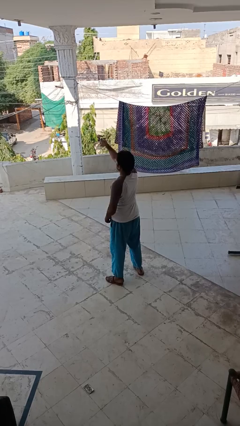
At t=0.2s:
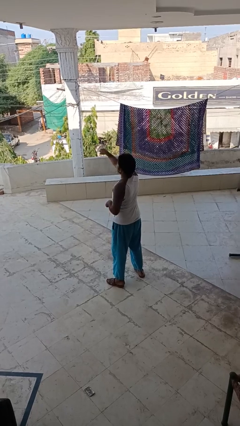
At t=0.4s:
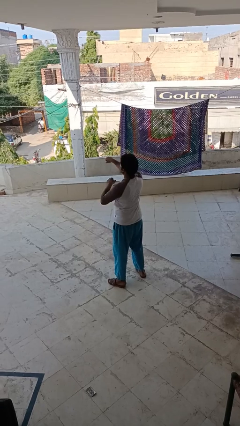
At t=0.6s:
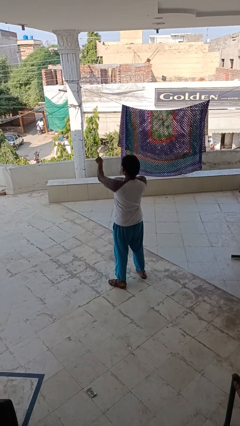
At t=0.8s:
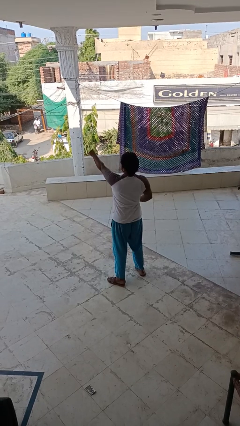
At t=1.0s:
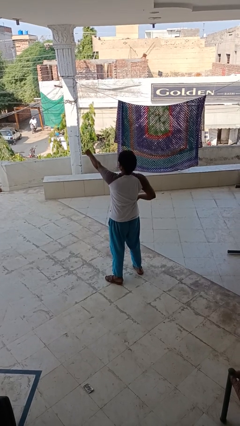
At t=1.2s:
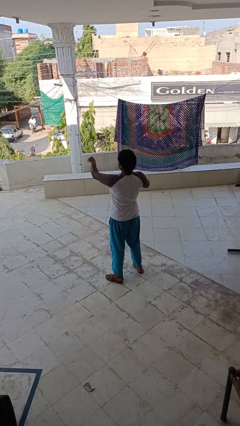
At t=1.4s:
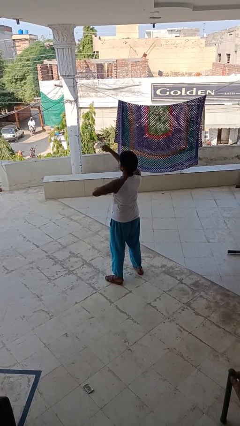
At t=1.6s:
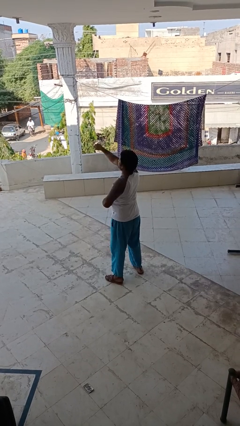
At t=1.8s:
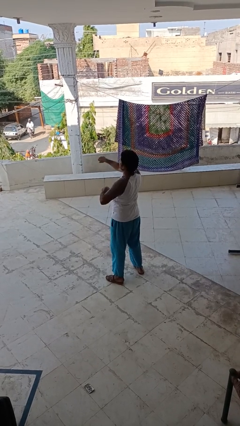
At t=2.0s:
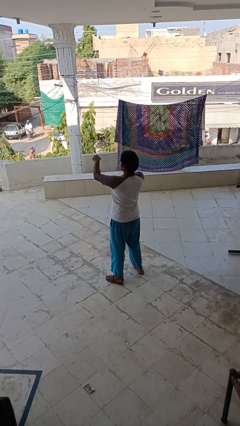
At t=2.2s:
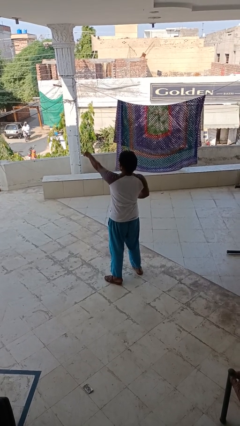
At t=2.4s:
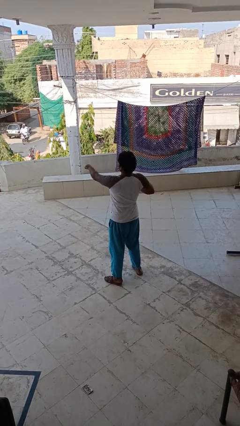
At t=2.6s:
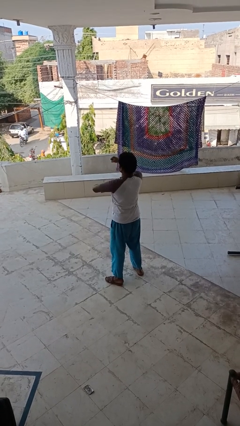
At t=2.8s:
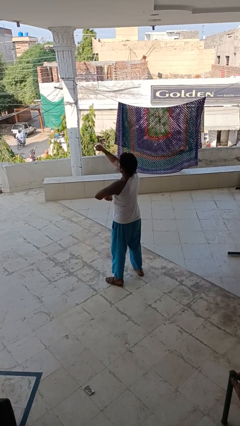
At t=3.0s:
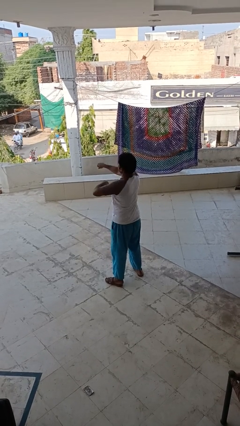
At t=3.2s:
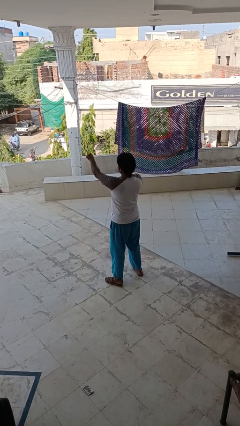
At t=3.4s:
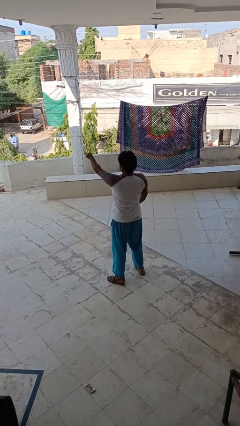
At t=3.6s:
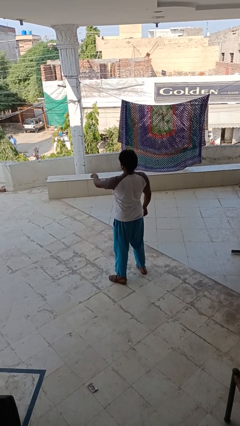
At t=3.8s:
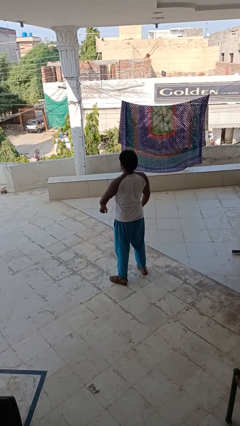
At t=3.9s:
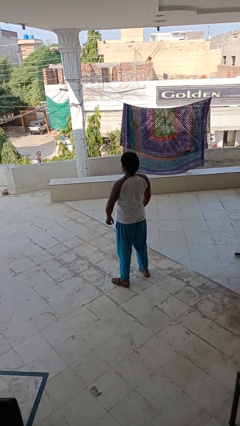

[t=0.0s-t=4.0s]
person punches

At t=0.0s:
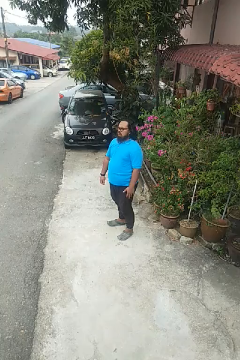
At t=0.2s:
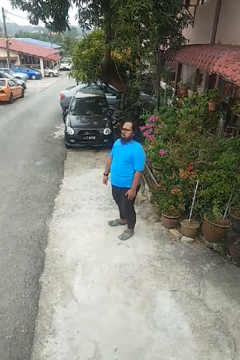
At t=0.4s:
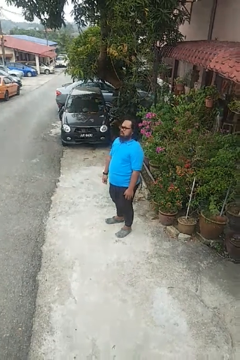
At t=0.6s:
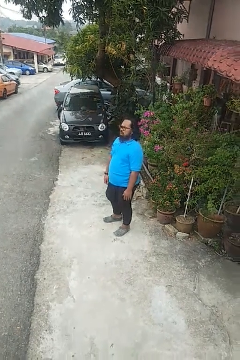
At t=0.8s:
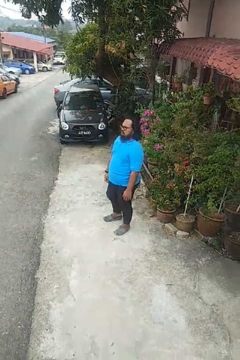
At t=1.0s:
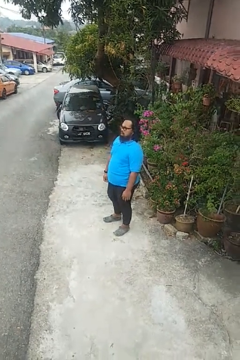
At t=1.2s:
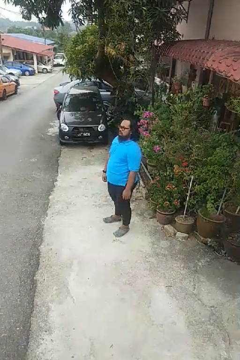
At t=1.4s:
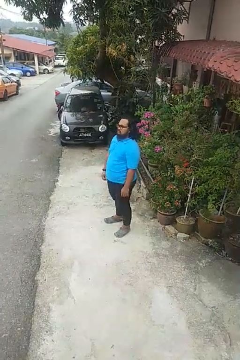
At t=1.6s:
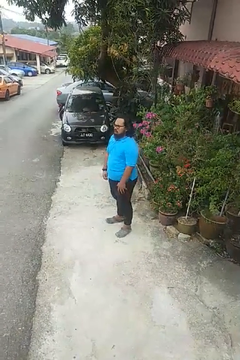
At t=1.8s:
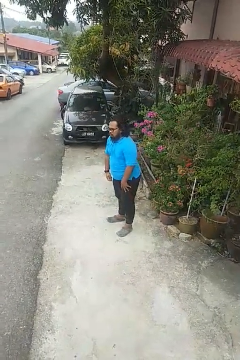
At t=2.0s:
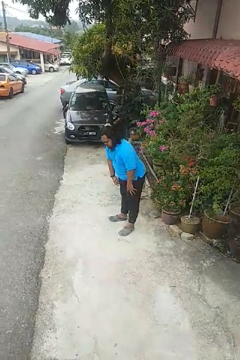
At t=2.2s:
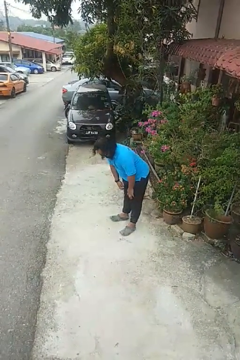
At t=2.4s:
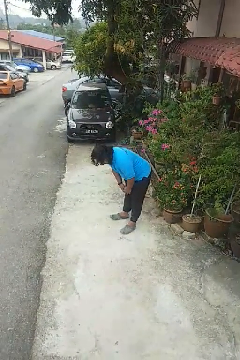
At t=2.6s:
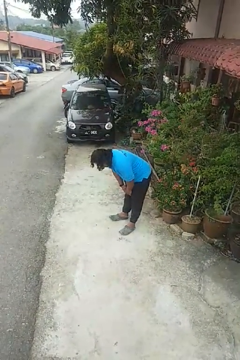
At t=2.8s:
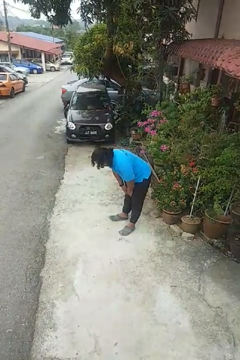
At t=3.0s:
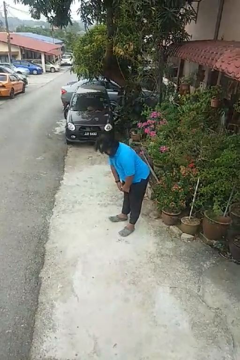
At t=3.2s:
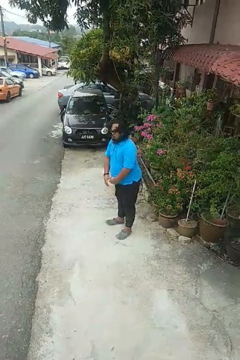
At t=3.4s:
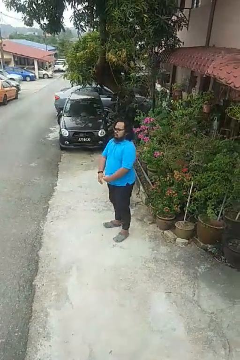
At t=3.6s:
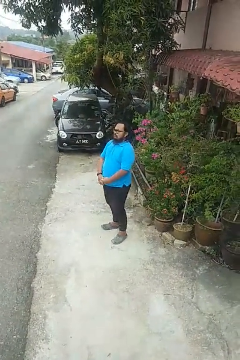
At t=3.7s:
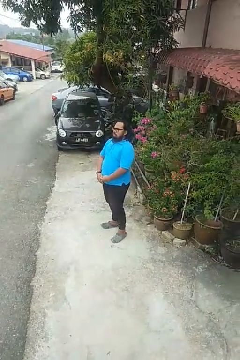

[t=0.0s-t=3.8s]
person bows

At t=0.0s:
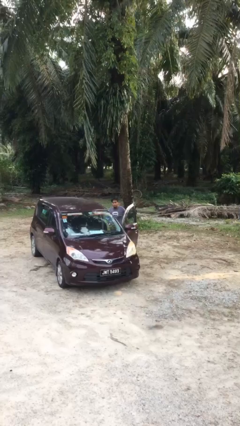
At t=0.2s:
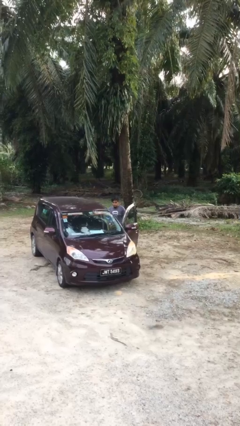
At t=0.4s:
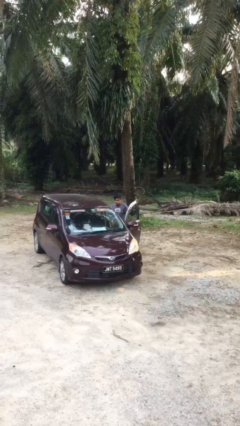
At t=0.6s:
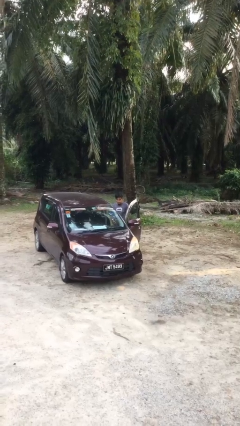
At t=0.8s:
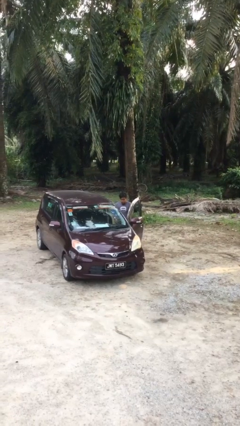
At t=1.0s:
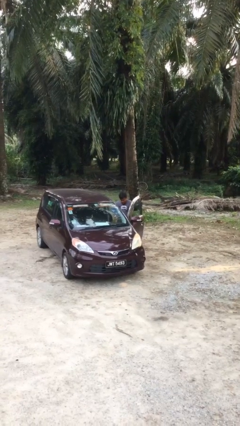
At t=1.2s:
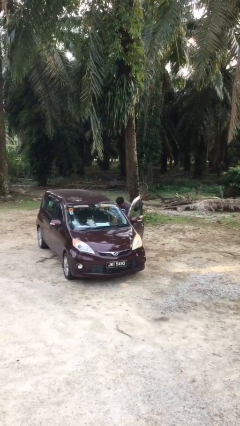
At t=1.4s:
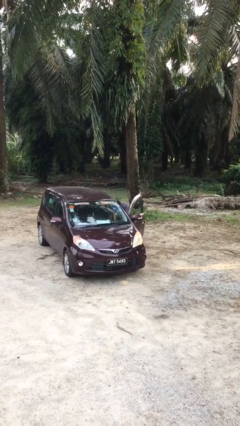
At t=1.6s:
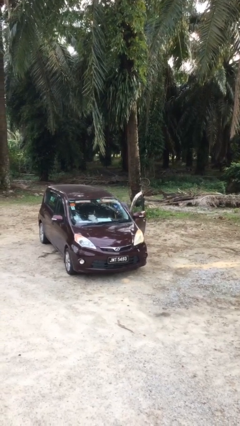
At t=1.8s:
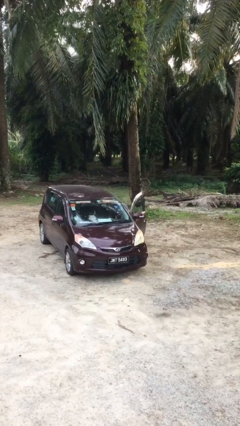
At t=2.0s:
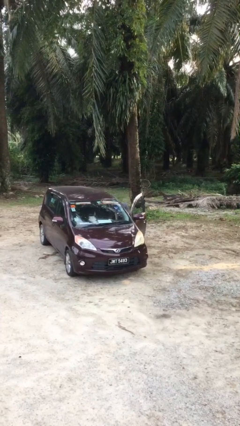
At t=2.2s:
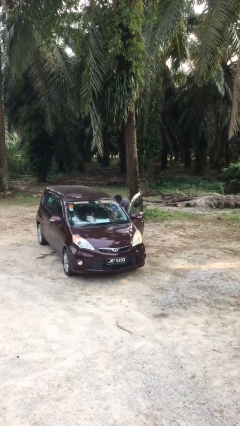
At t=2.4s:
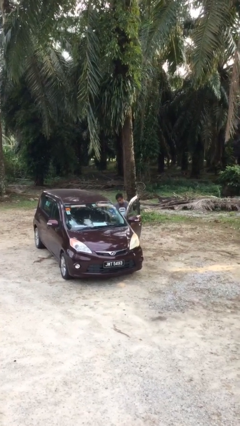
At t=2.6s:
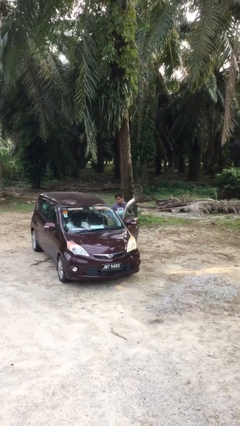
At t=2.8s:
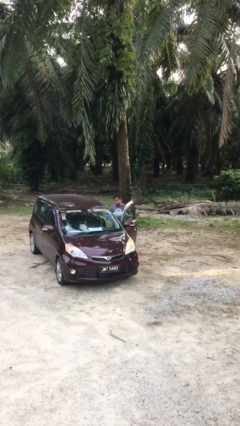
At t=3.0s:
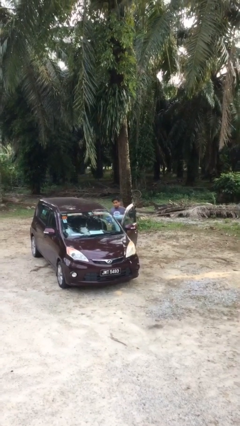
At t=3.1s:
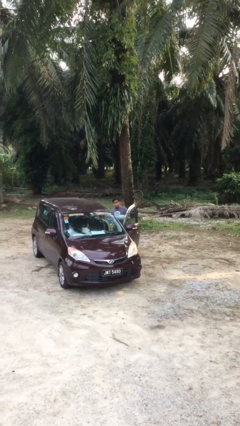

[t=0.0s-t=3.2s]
person unloads car

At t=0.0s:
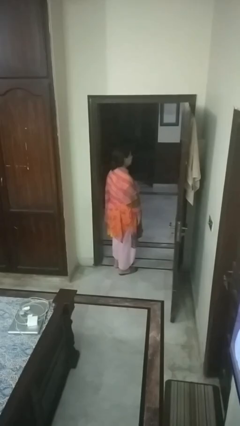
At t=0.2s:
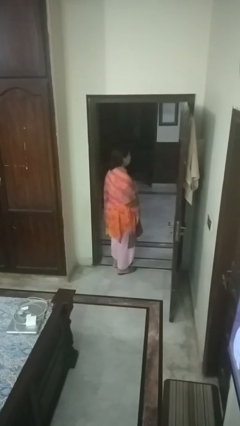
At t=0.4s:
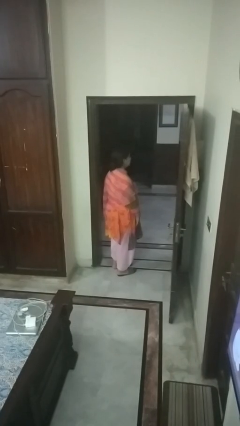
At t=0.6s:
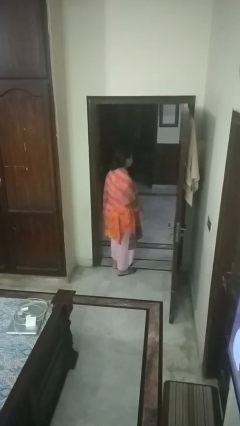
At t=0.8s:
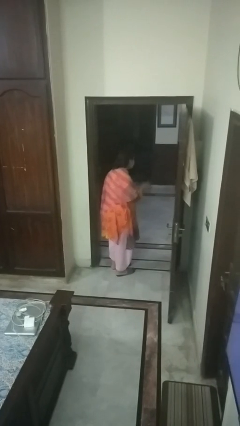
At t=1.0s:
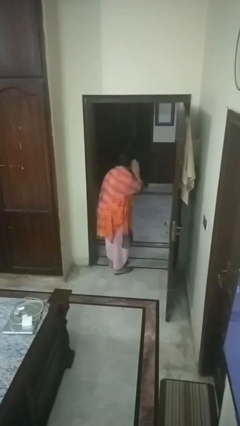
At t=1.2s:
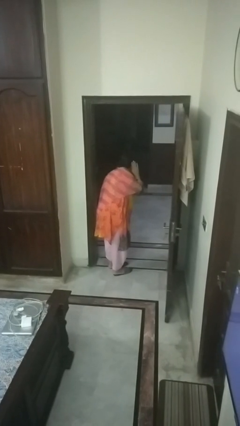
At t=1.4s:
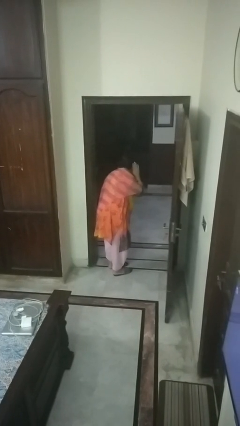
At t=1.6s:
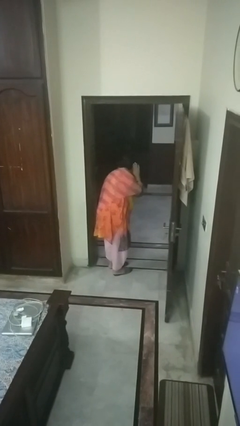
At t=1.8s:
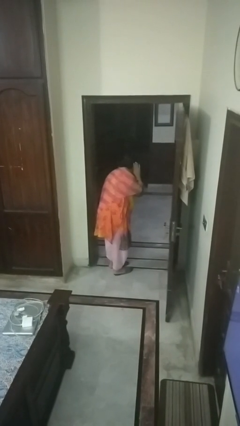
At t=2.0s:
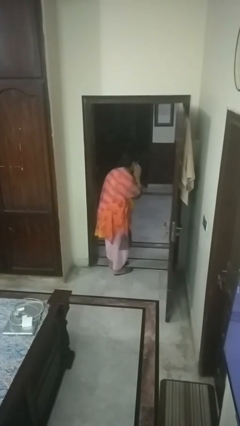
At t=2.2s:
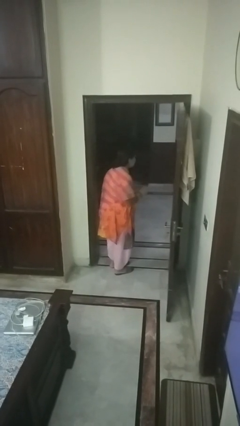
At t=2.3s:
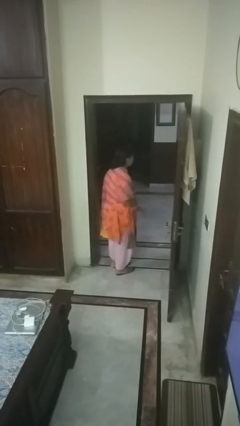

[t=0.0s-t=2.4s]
person gestures listen closely

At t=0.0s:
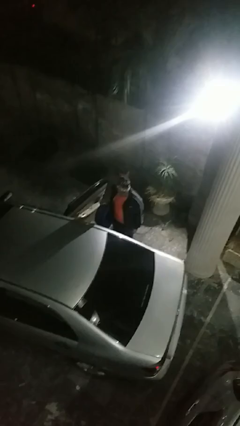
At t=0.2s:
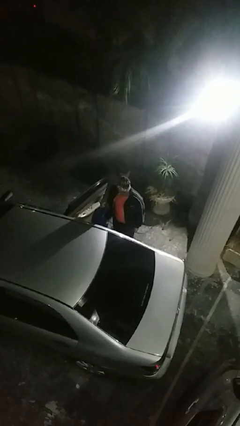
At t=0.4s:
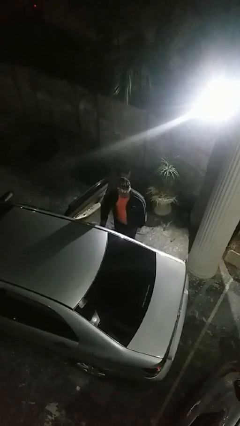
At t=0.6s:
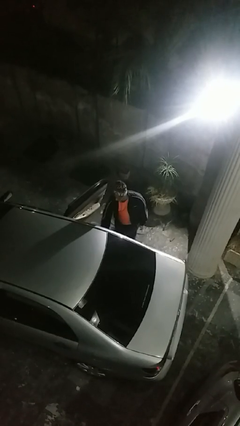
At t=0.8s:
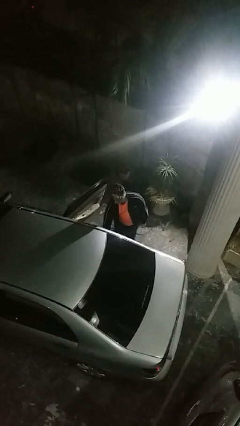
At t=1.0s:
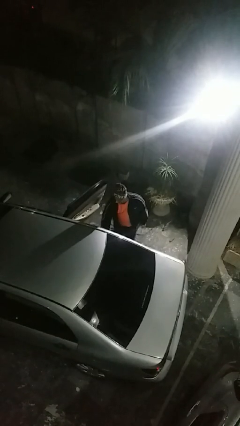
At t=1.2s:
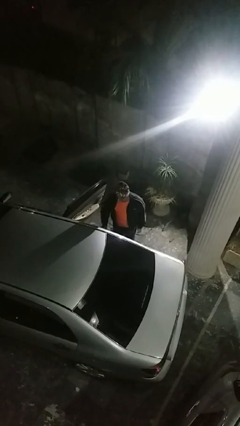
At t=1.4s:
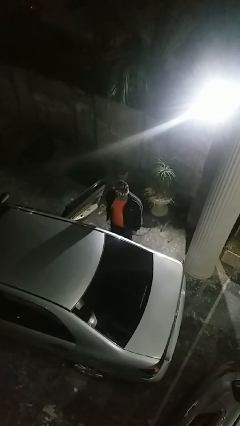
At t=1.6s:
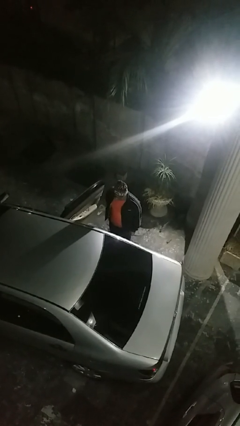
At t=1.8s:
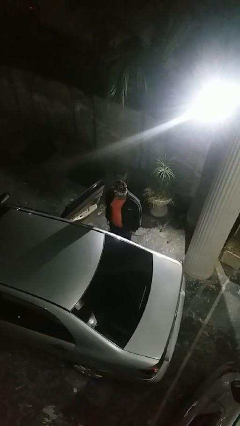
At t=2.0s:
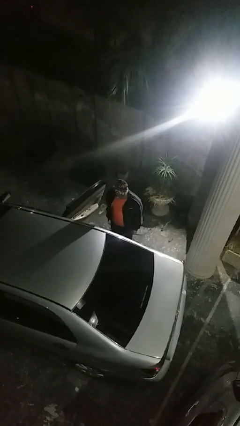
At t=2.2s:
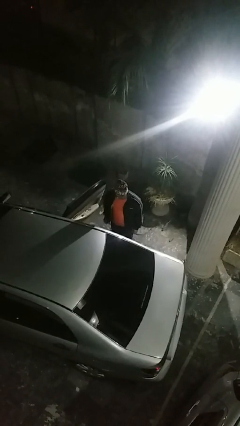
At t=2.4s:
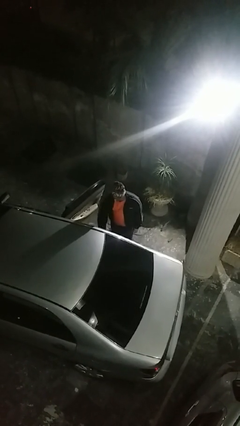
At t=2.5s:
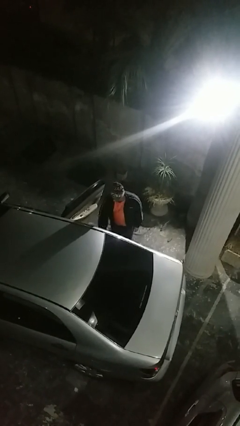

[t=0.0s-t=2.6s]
person loads car

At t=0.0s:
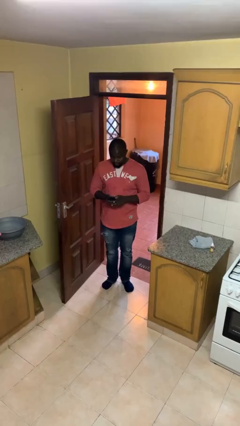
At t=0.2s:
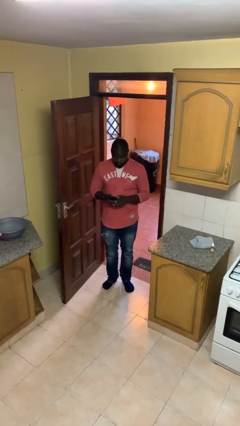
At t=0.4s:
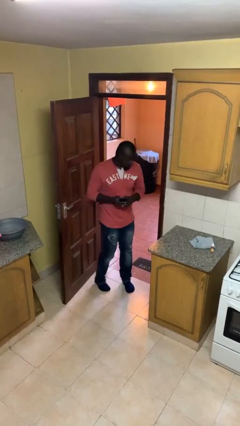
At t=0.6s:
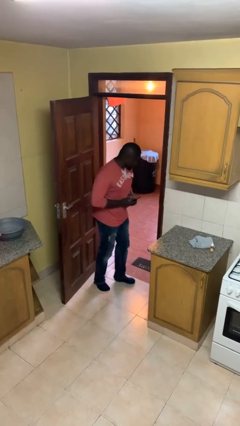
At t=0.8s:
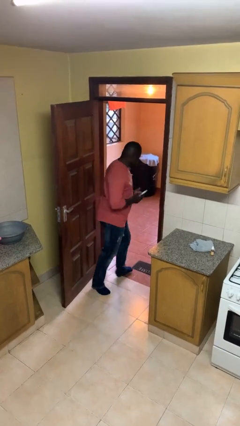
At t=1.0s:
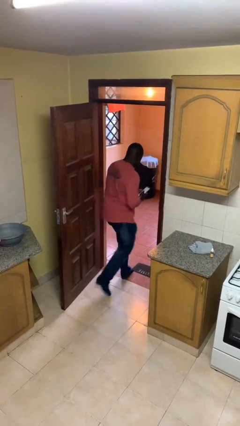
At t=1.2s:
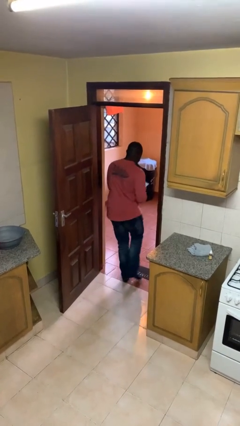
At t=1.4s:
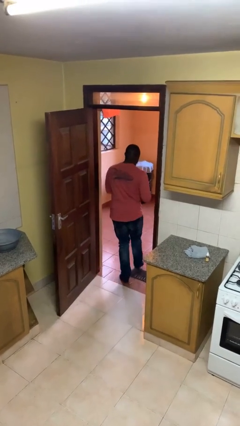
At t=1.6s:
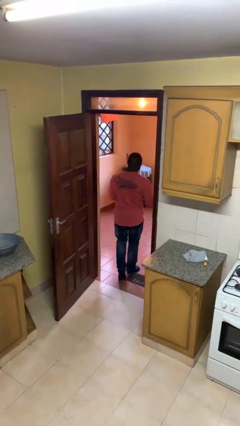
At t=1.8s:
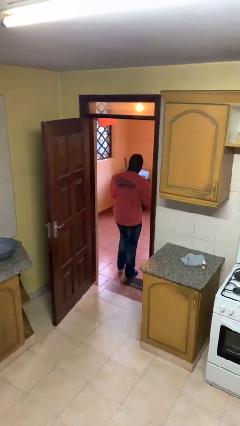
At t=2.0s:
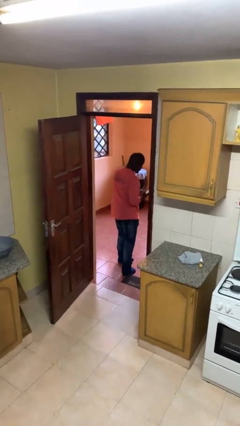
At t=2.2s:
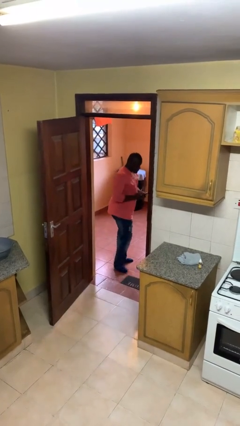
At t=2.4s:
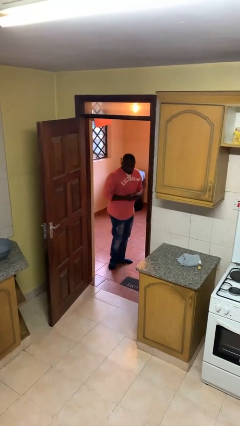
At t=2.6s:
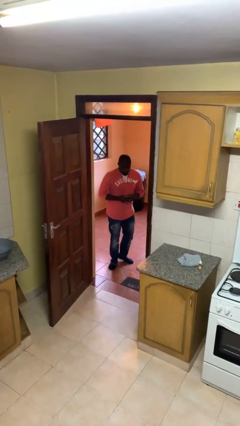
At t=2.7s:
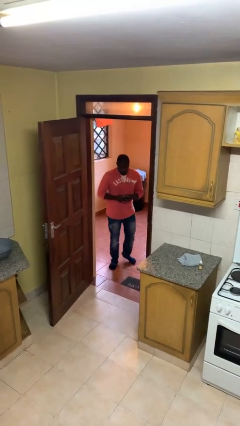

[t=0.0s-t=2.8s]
person exits scene through structure
